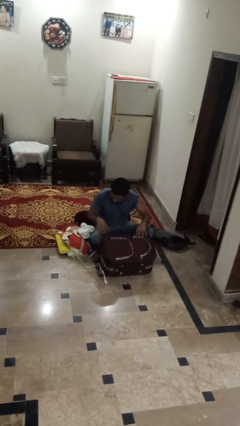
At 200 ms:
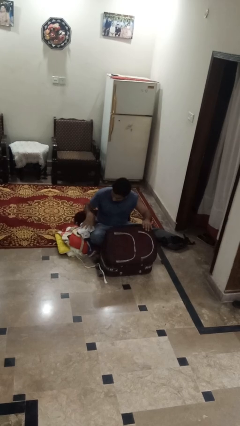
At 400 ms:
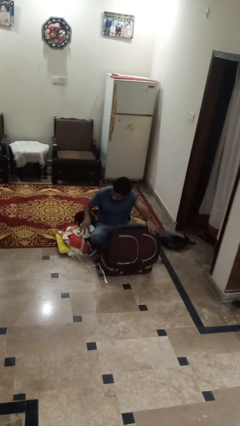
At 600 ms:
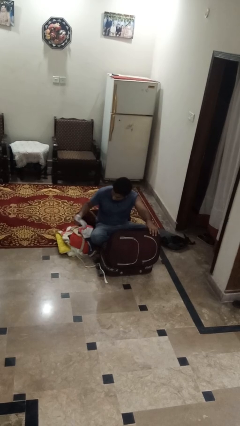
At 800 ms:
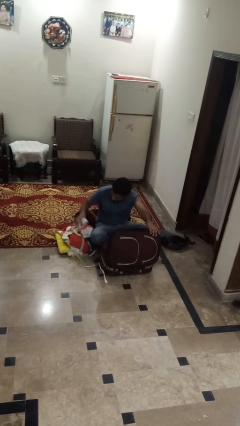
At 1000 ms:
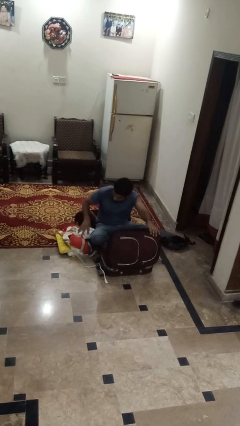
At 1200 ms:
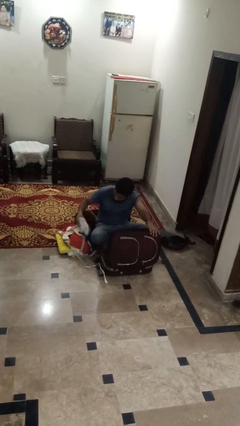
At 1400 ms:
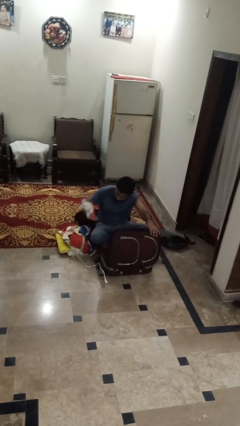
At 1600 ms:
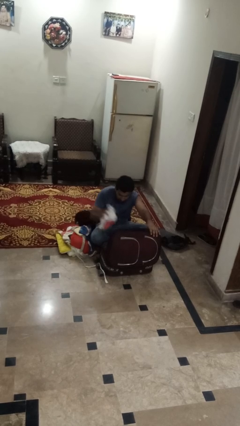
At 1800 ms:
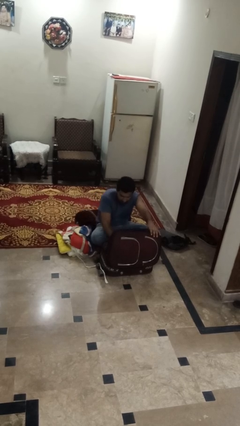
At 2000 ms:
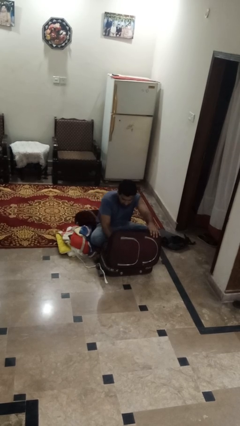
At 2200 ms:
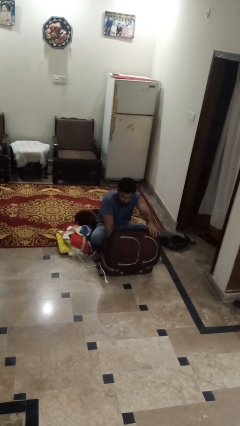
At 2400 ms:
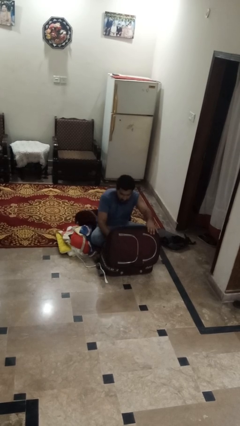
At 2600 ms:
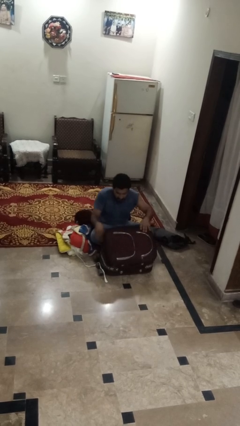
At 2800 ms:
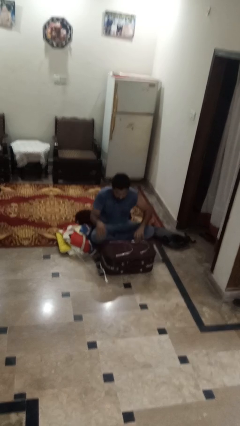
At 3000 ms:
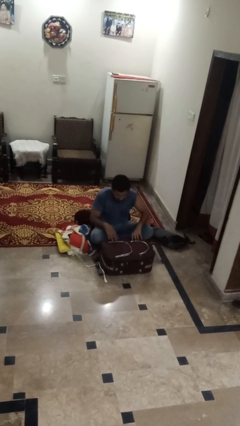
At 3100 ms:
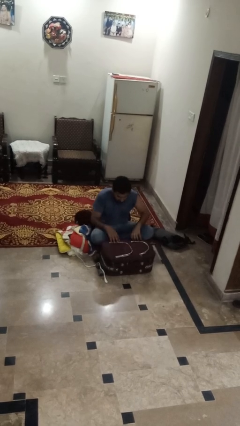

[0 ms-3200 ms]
person loads clothes into suitcase

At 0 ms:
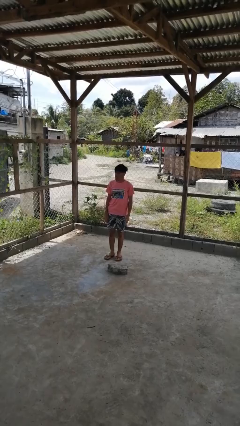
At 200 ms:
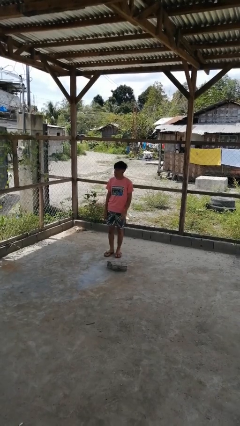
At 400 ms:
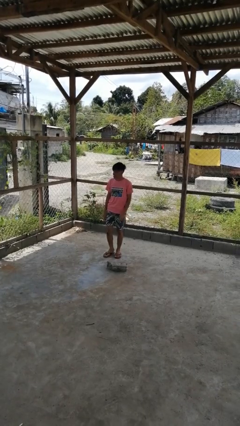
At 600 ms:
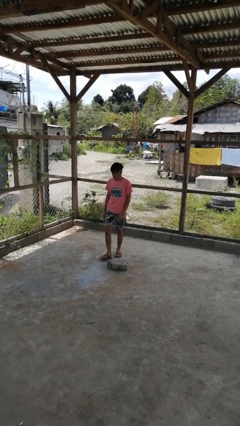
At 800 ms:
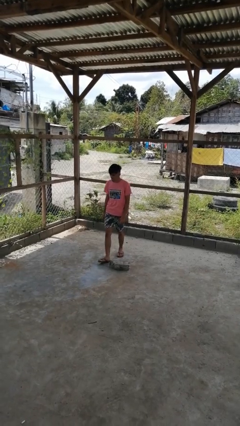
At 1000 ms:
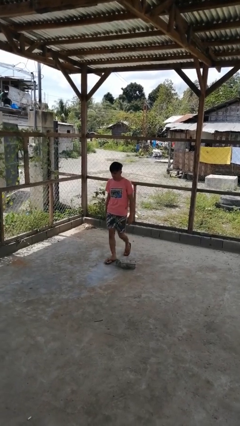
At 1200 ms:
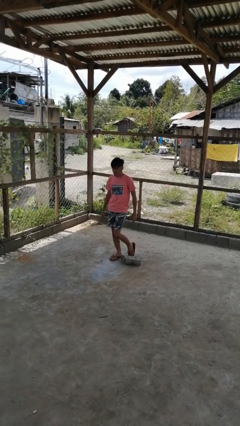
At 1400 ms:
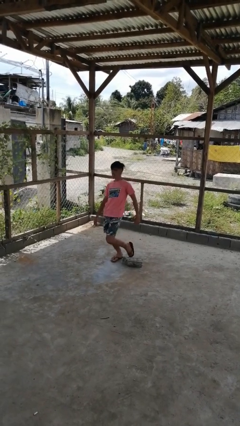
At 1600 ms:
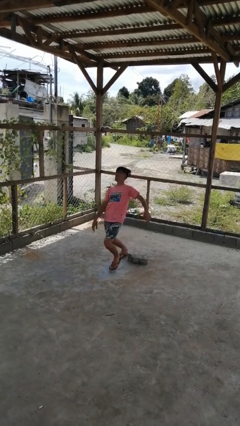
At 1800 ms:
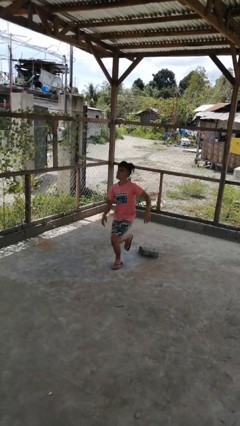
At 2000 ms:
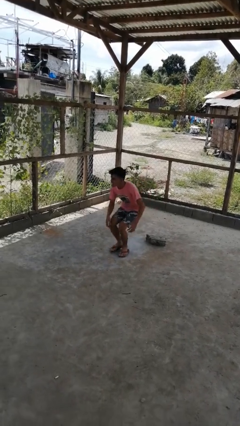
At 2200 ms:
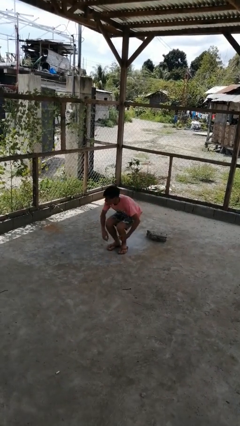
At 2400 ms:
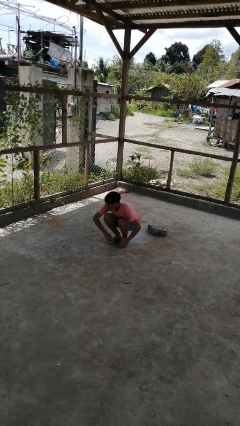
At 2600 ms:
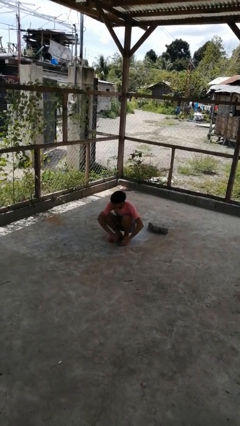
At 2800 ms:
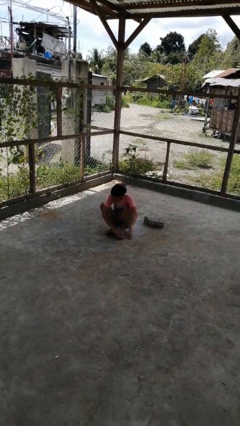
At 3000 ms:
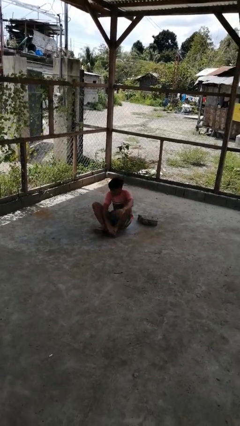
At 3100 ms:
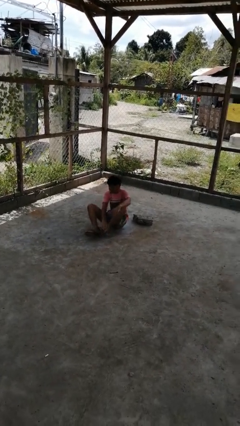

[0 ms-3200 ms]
person trips on object on floor

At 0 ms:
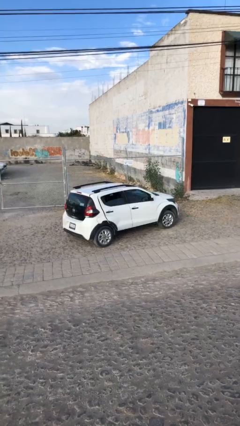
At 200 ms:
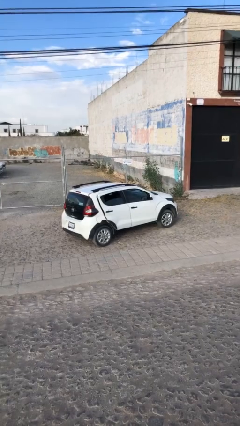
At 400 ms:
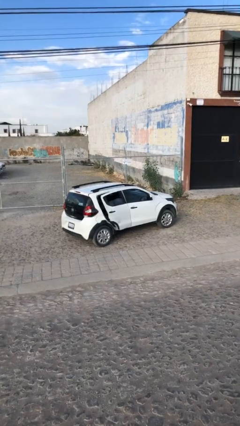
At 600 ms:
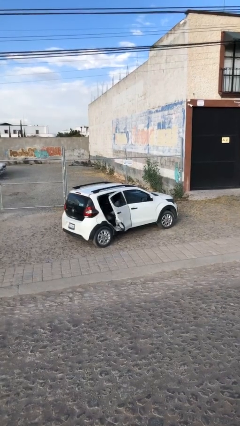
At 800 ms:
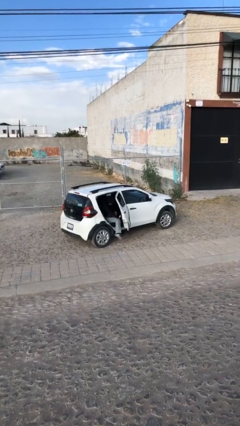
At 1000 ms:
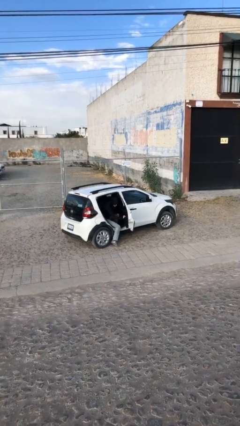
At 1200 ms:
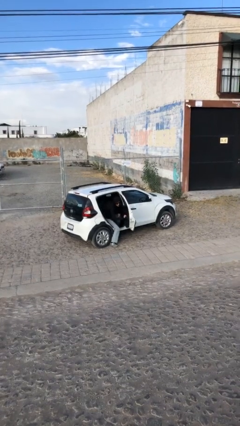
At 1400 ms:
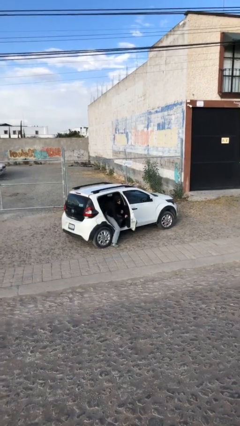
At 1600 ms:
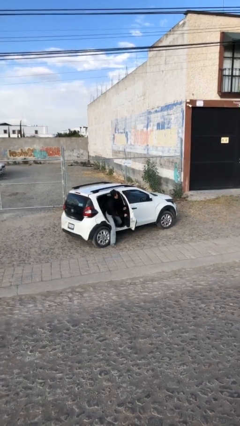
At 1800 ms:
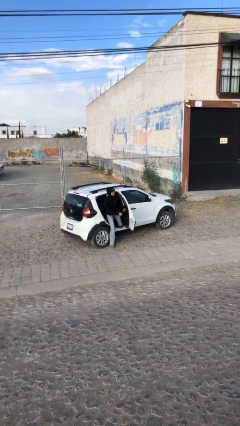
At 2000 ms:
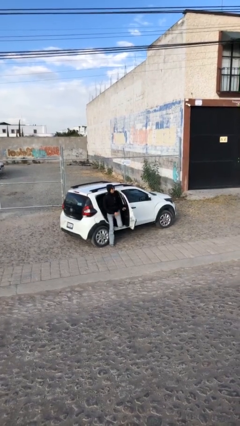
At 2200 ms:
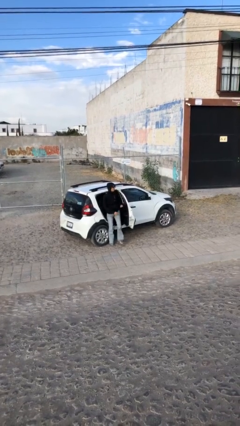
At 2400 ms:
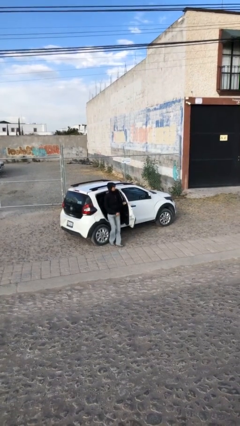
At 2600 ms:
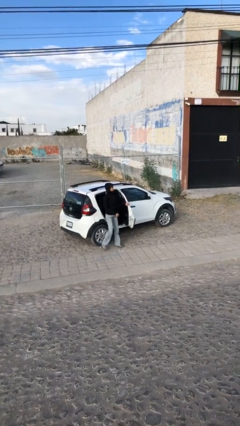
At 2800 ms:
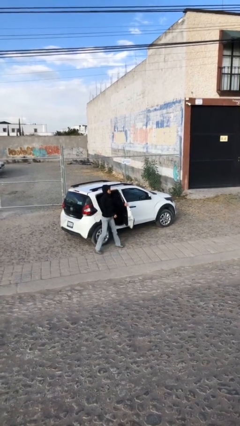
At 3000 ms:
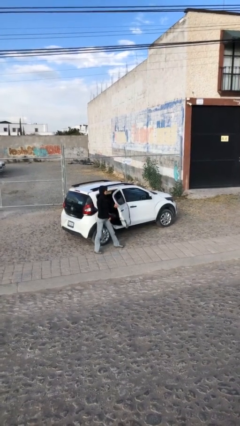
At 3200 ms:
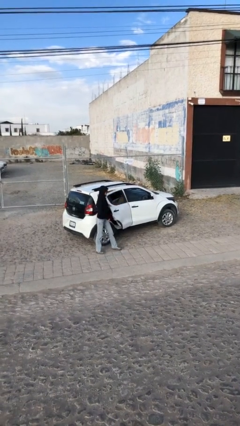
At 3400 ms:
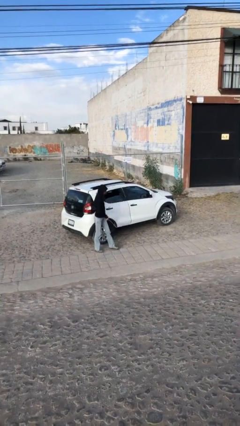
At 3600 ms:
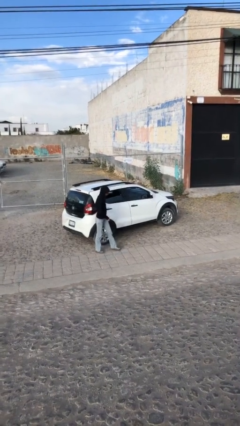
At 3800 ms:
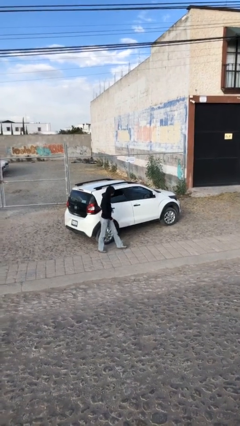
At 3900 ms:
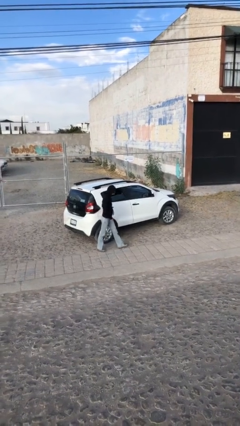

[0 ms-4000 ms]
car drops off person

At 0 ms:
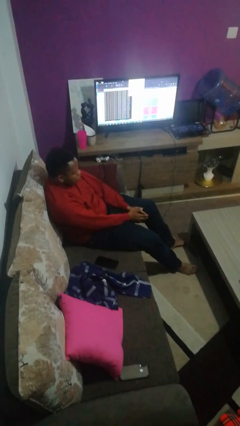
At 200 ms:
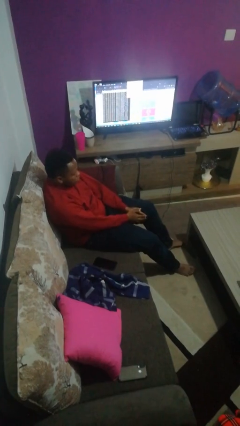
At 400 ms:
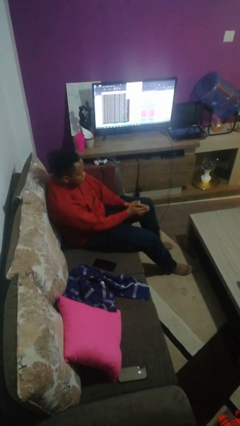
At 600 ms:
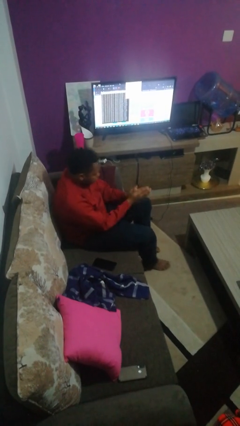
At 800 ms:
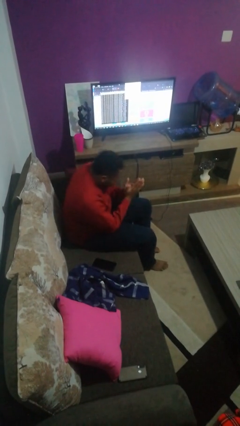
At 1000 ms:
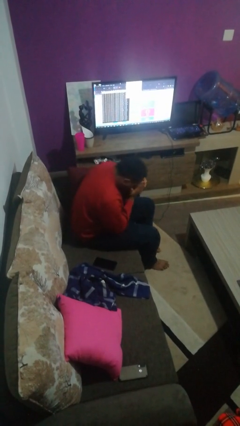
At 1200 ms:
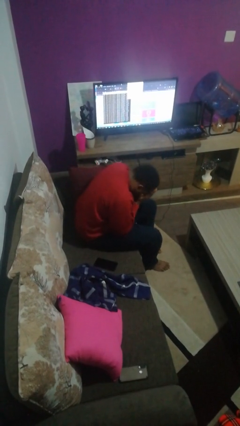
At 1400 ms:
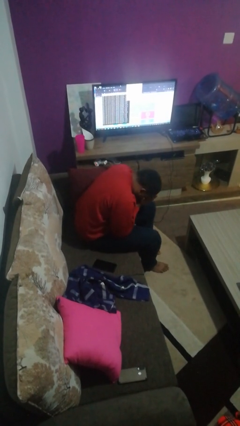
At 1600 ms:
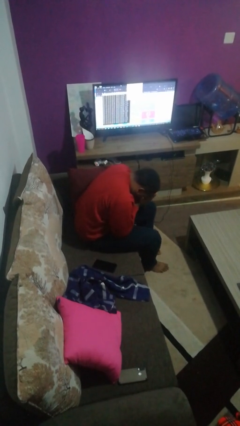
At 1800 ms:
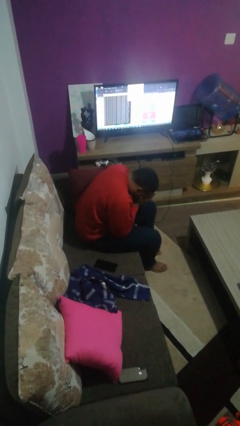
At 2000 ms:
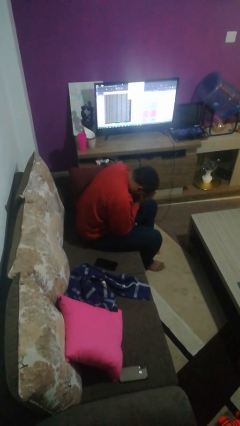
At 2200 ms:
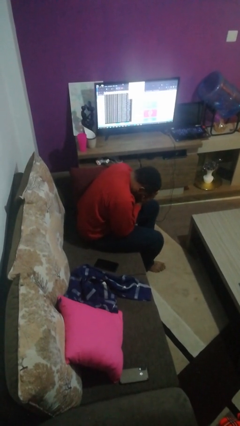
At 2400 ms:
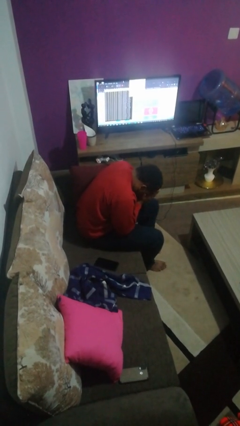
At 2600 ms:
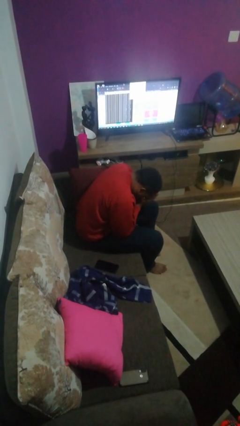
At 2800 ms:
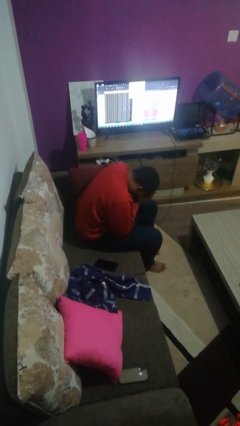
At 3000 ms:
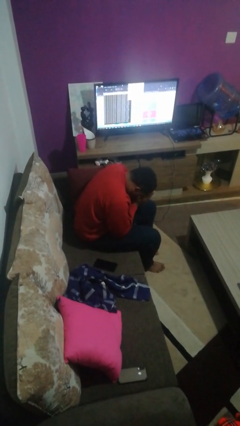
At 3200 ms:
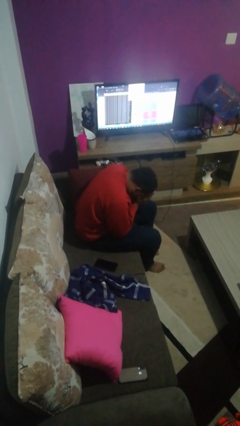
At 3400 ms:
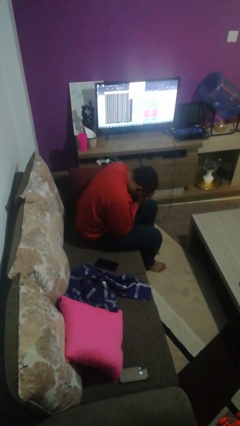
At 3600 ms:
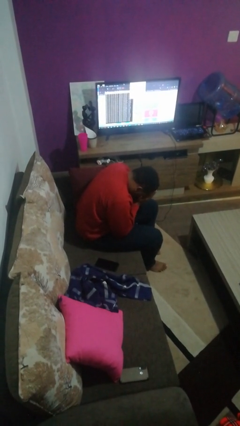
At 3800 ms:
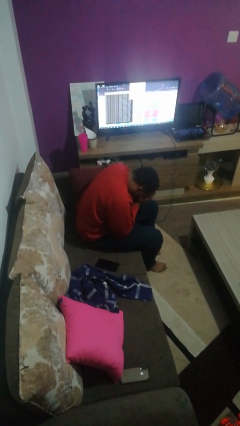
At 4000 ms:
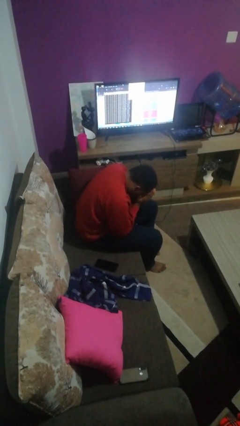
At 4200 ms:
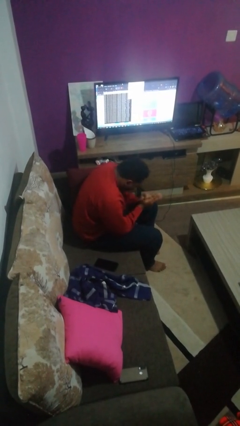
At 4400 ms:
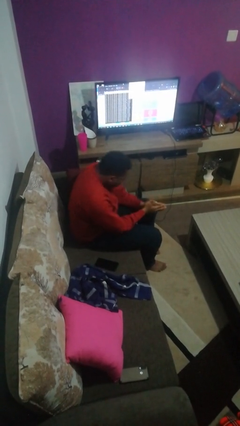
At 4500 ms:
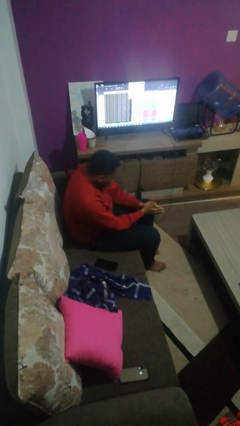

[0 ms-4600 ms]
person prays

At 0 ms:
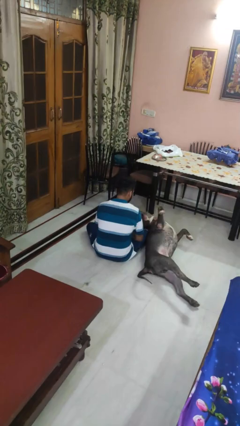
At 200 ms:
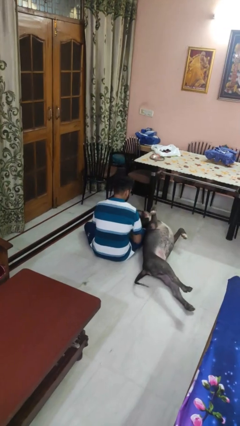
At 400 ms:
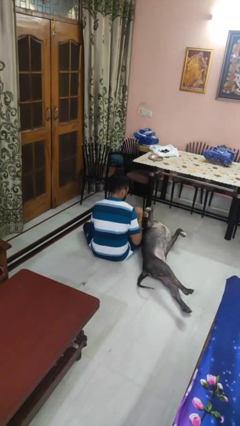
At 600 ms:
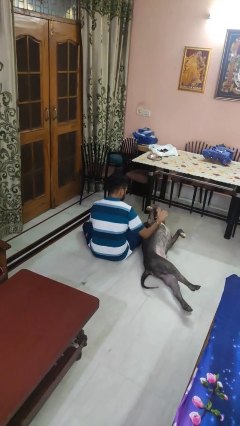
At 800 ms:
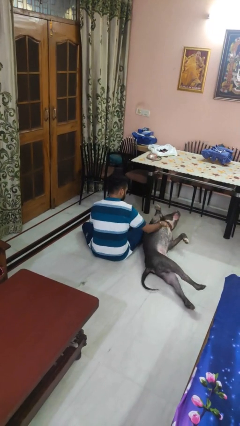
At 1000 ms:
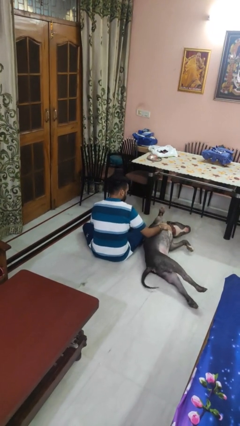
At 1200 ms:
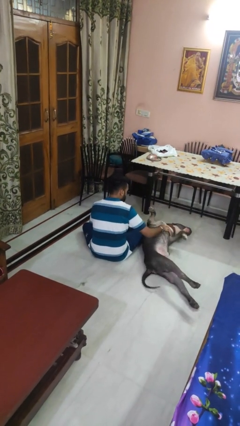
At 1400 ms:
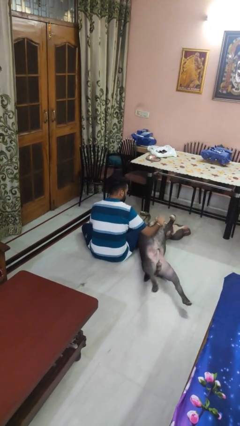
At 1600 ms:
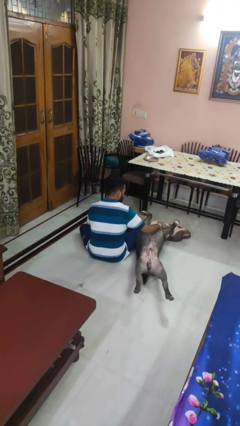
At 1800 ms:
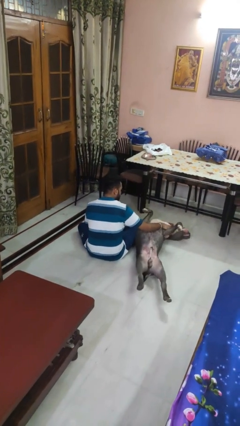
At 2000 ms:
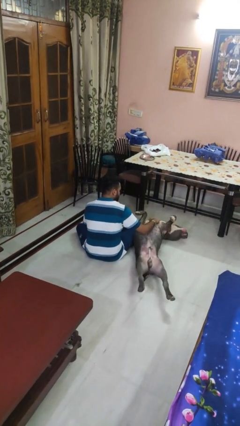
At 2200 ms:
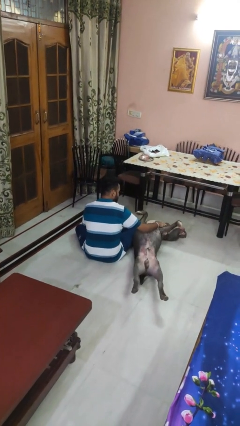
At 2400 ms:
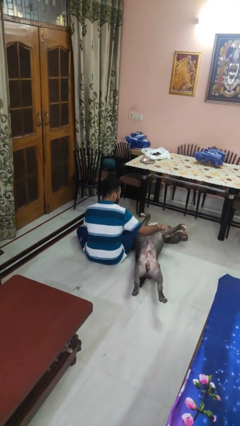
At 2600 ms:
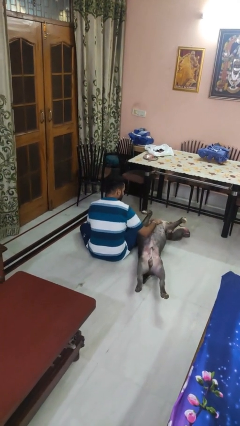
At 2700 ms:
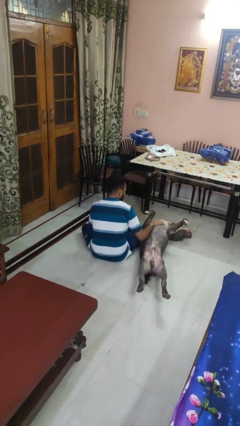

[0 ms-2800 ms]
person pets dog
